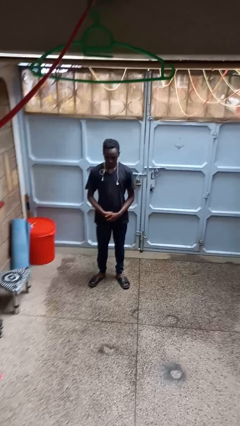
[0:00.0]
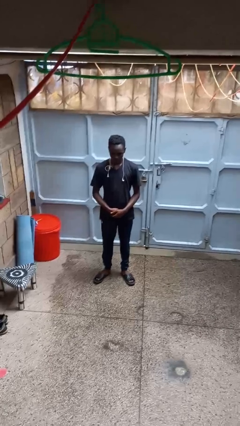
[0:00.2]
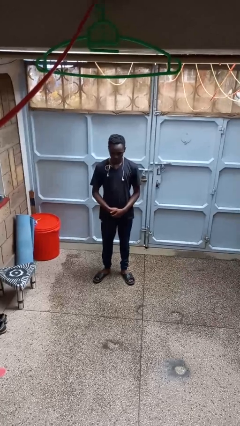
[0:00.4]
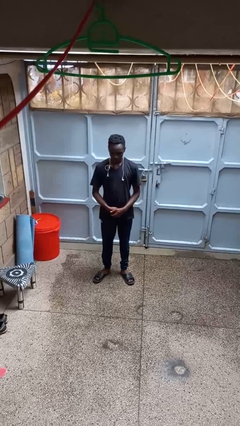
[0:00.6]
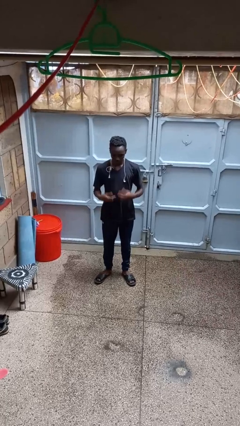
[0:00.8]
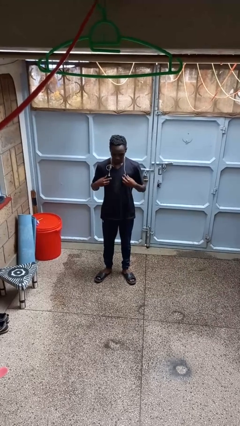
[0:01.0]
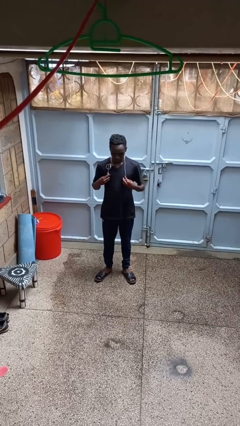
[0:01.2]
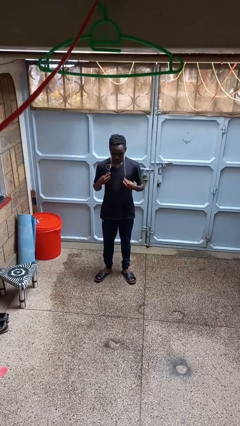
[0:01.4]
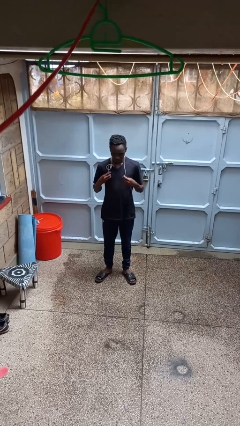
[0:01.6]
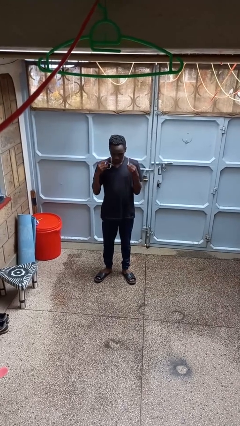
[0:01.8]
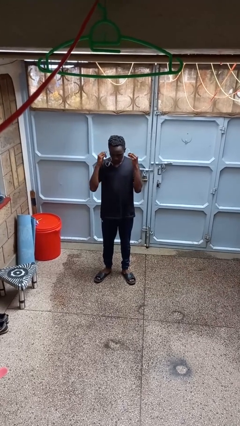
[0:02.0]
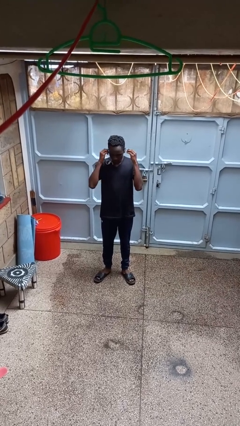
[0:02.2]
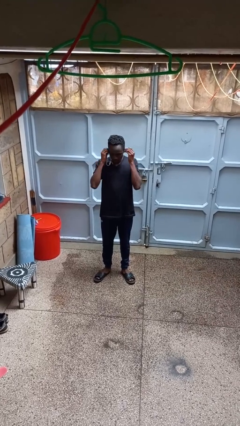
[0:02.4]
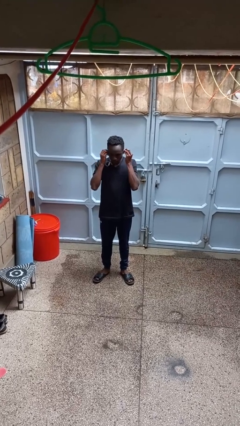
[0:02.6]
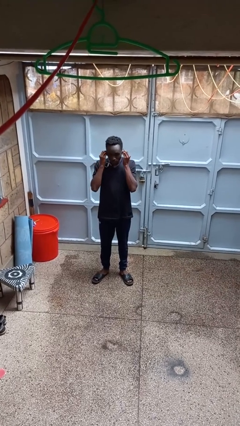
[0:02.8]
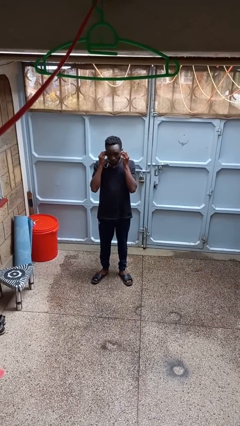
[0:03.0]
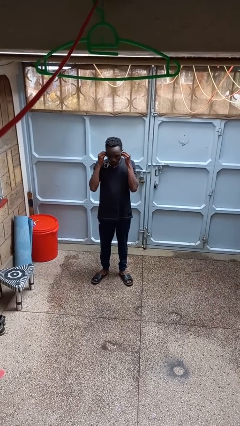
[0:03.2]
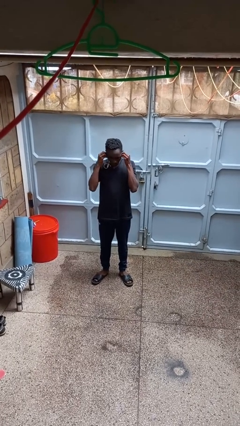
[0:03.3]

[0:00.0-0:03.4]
person puts on headphones

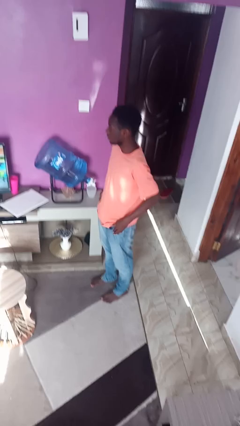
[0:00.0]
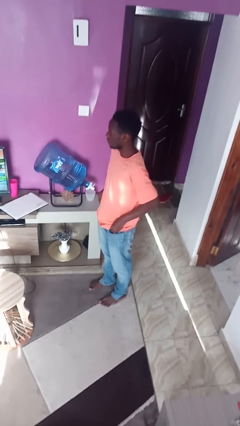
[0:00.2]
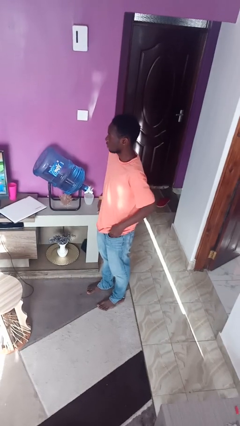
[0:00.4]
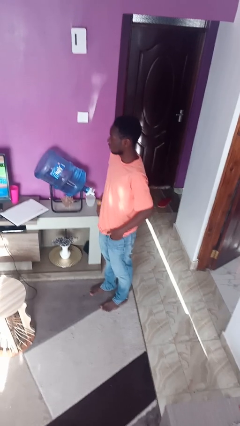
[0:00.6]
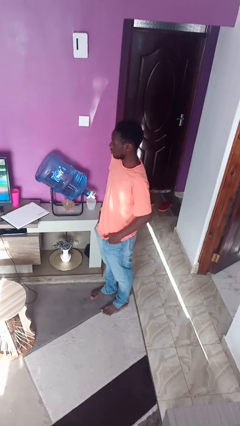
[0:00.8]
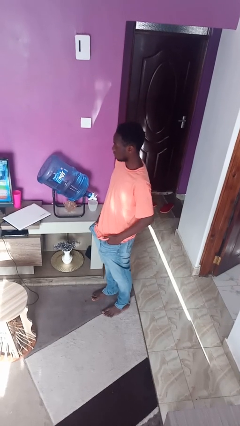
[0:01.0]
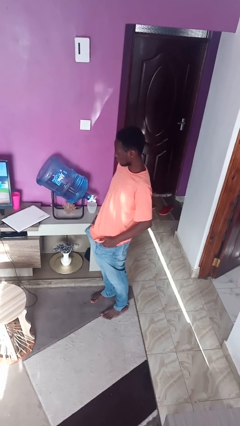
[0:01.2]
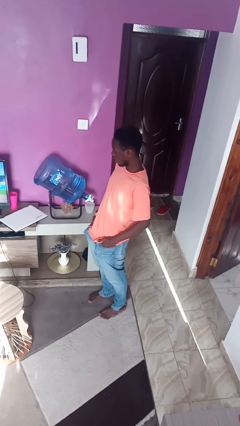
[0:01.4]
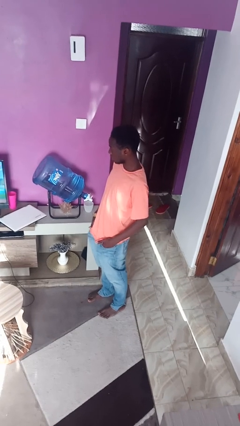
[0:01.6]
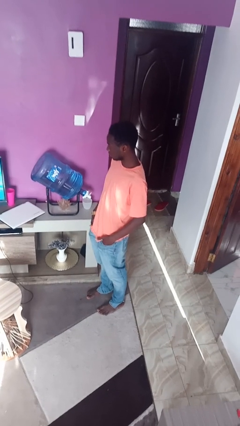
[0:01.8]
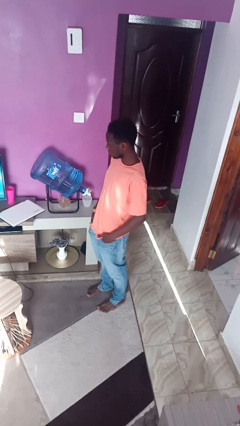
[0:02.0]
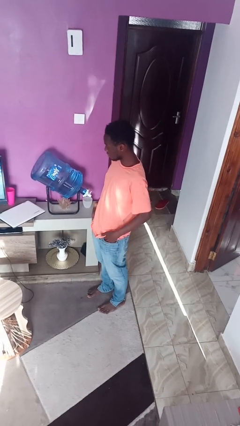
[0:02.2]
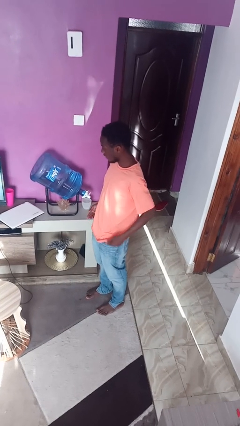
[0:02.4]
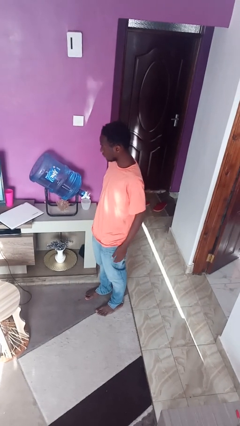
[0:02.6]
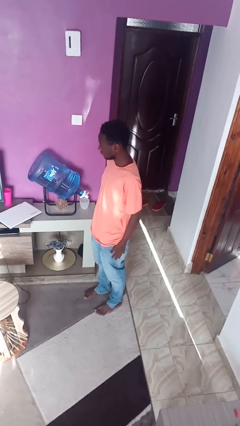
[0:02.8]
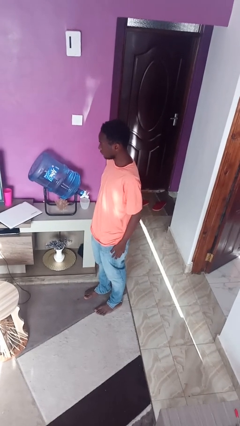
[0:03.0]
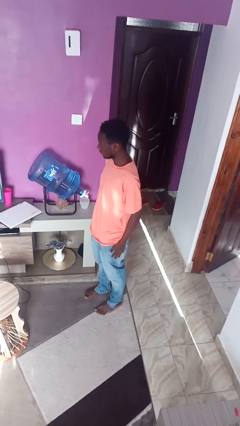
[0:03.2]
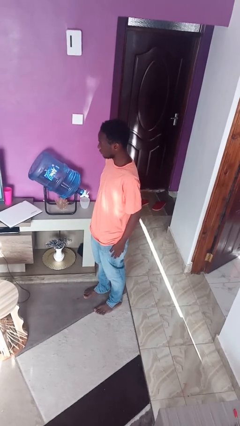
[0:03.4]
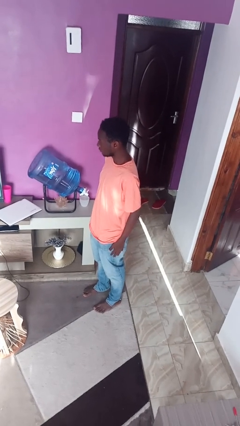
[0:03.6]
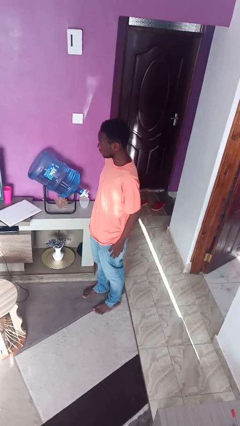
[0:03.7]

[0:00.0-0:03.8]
person puts hands in back pockets

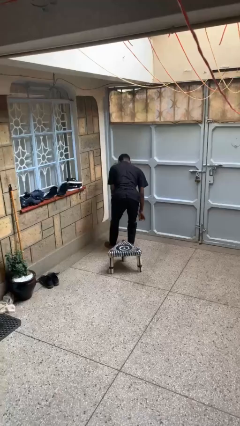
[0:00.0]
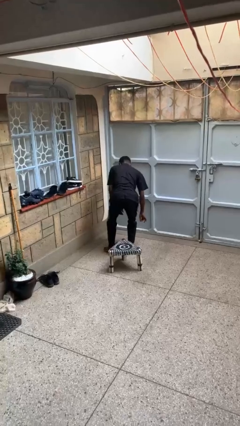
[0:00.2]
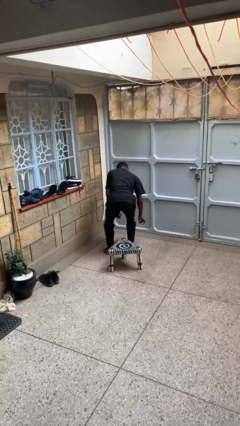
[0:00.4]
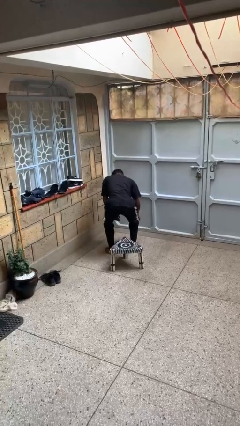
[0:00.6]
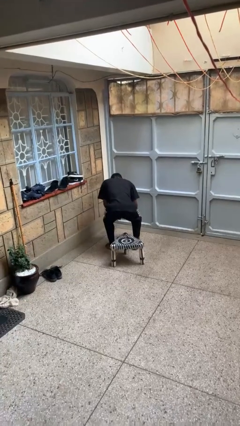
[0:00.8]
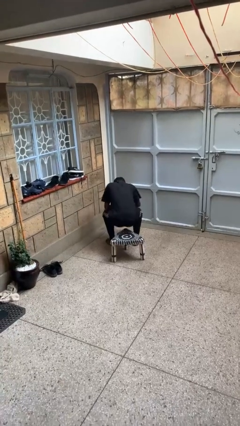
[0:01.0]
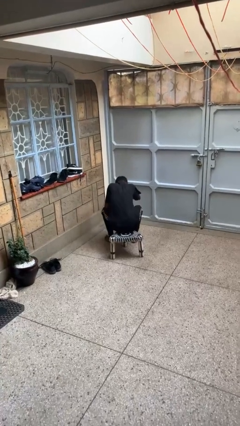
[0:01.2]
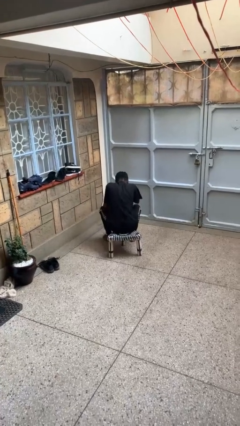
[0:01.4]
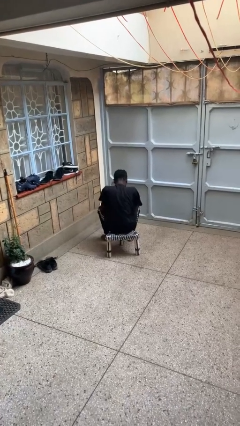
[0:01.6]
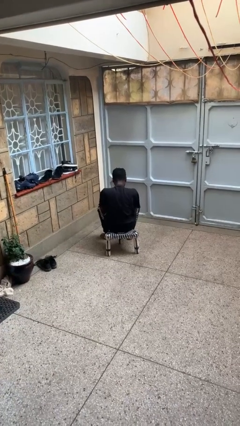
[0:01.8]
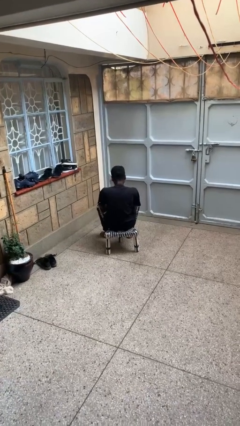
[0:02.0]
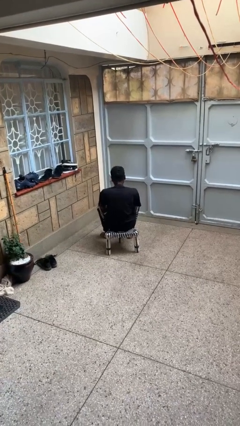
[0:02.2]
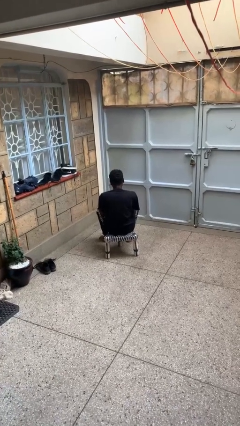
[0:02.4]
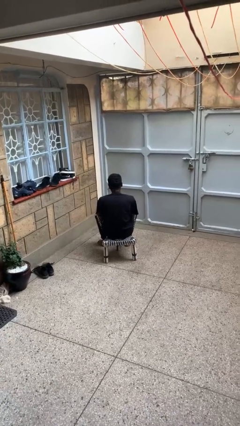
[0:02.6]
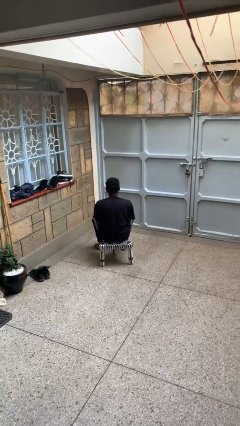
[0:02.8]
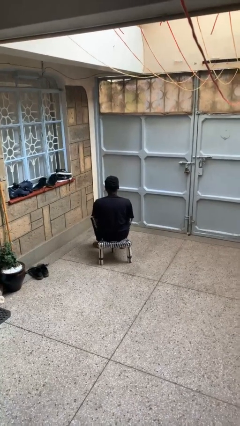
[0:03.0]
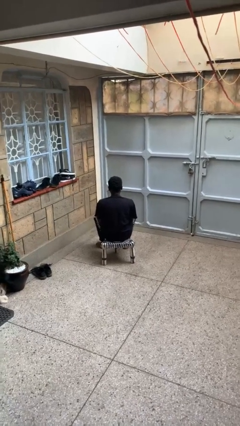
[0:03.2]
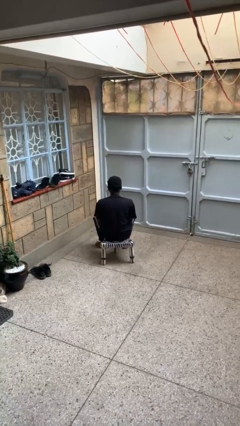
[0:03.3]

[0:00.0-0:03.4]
person sits down

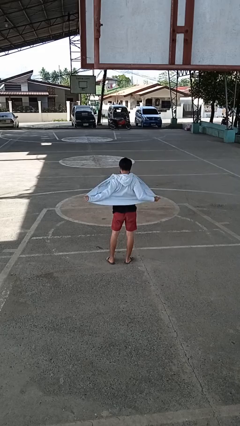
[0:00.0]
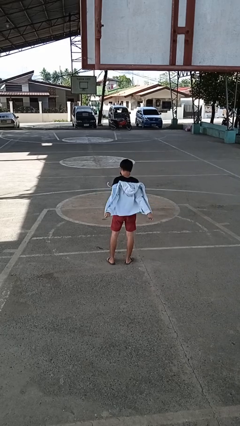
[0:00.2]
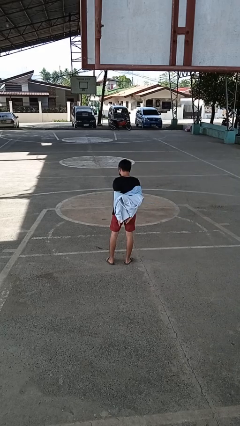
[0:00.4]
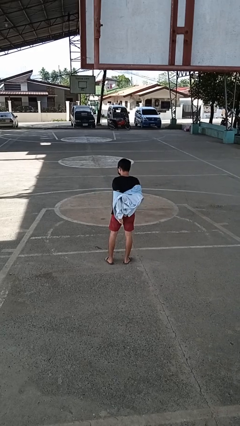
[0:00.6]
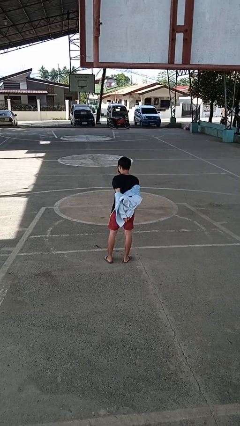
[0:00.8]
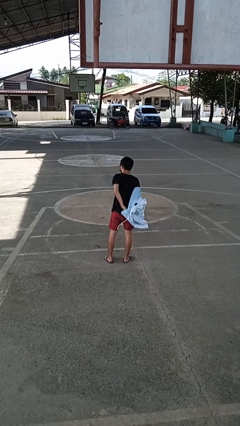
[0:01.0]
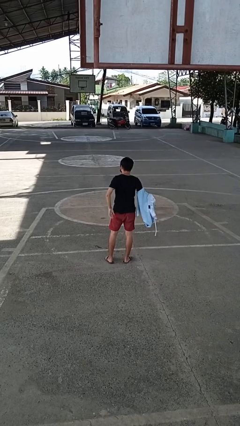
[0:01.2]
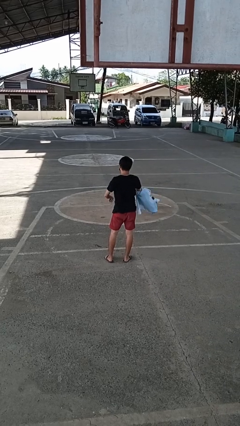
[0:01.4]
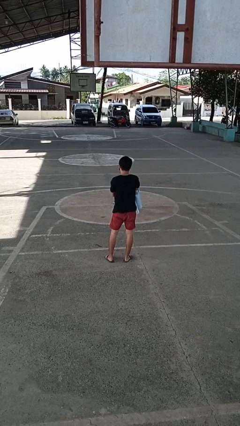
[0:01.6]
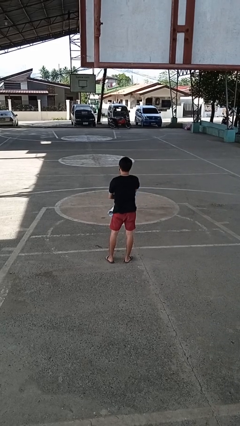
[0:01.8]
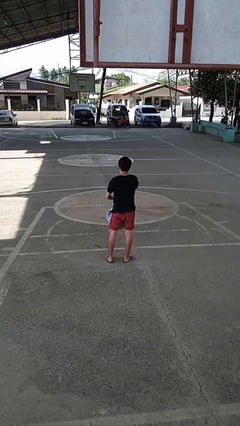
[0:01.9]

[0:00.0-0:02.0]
person takes off jacket

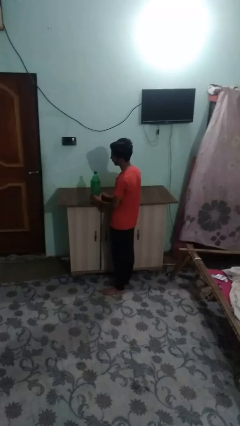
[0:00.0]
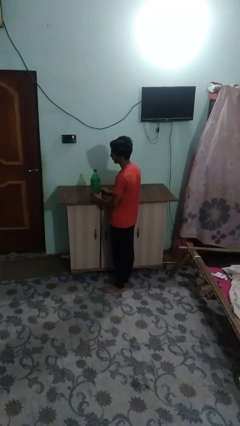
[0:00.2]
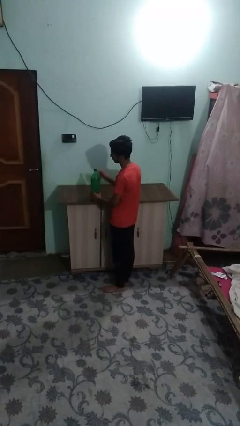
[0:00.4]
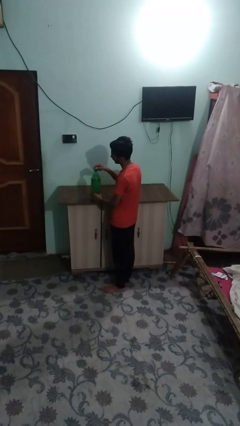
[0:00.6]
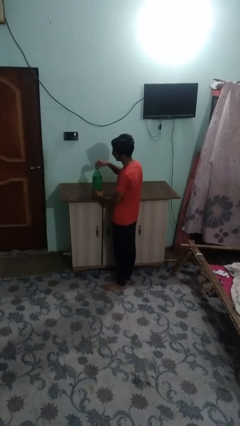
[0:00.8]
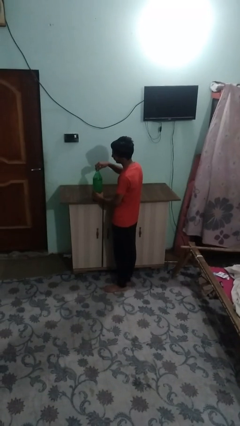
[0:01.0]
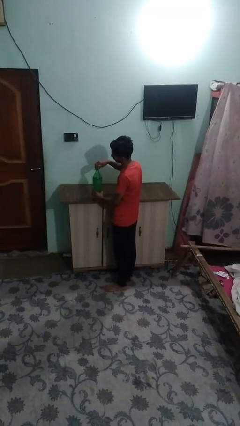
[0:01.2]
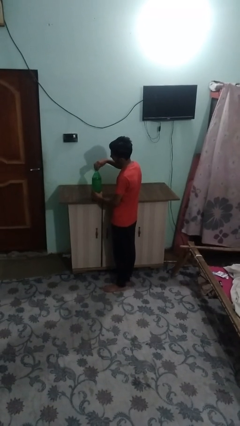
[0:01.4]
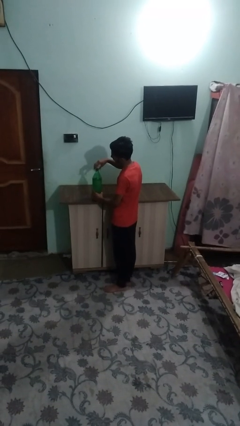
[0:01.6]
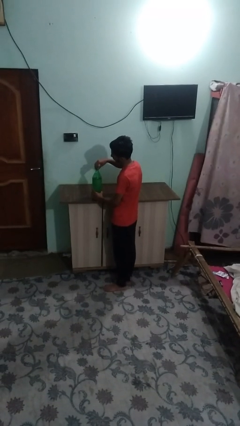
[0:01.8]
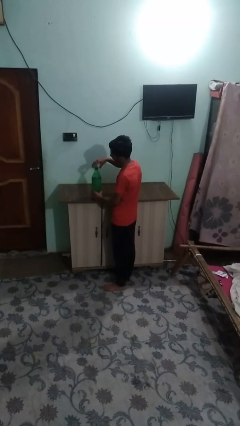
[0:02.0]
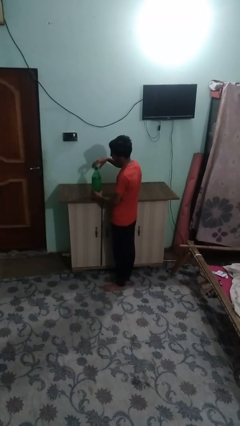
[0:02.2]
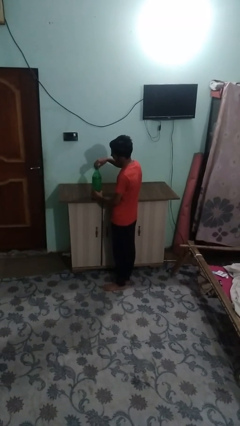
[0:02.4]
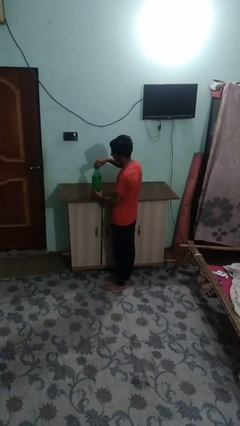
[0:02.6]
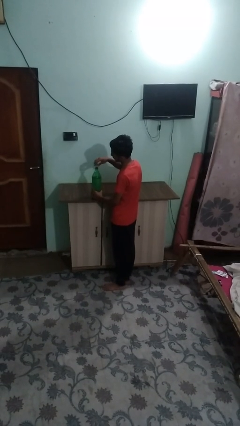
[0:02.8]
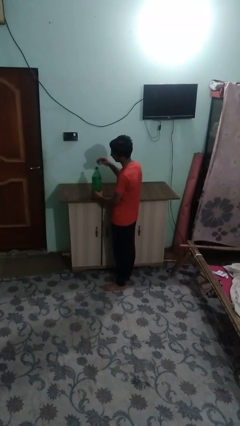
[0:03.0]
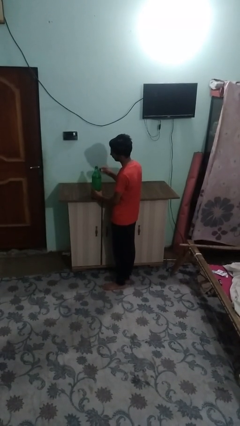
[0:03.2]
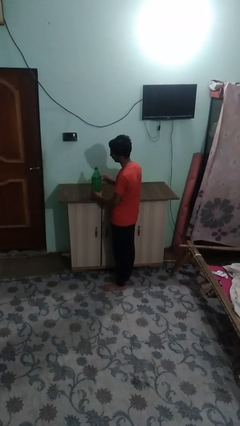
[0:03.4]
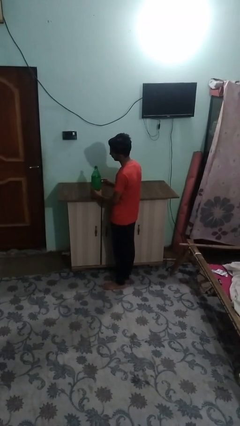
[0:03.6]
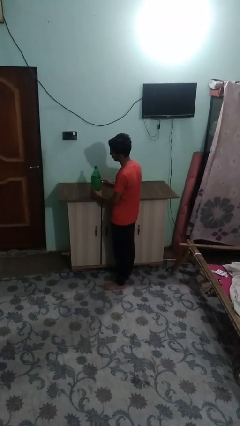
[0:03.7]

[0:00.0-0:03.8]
person unscrews lid from bottle

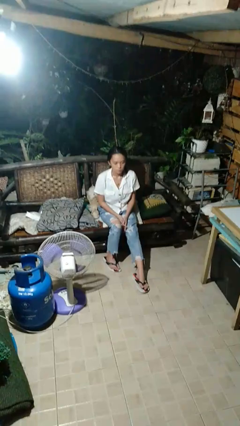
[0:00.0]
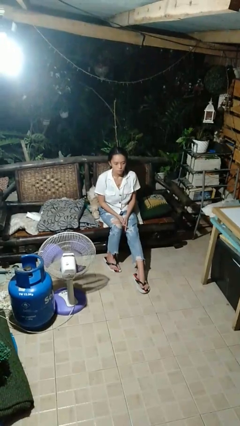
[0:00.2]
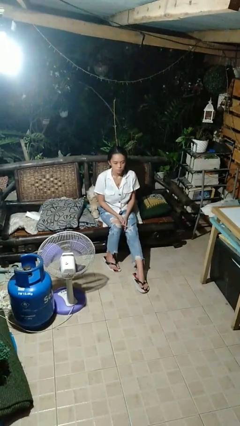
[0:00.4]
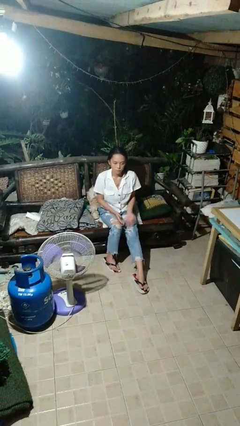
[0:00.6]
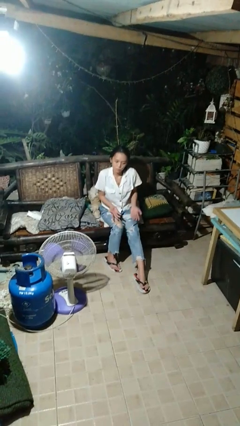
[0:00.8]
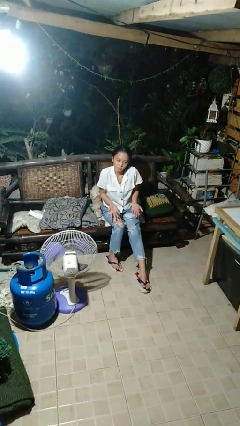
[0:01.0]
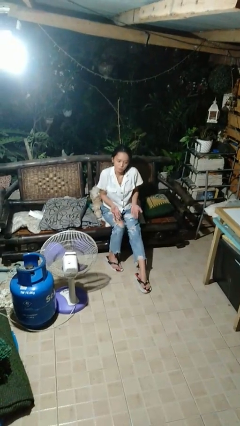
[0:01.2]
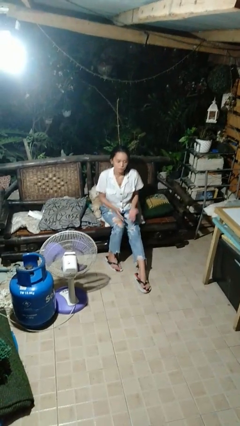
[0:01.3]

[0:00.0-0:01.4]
person shrugs
